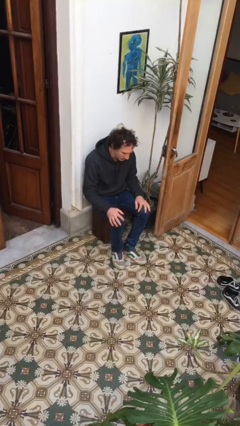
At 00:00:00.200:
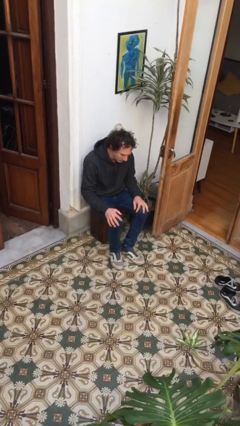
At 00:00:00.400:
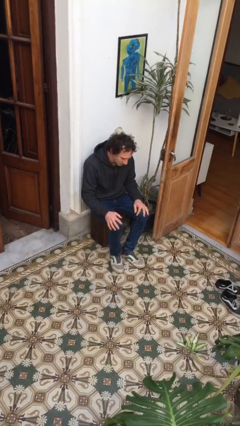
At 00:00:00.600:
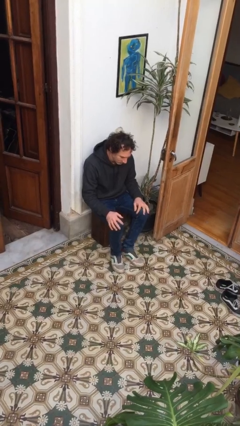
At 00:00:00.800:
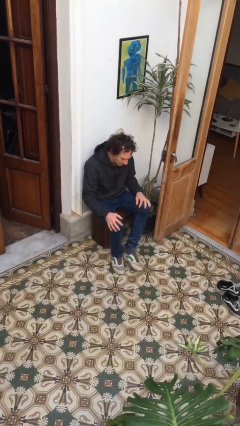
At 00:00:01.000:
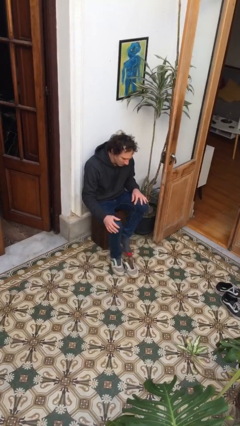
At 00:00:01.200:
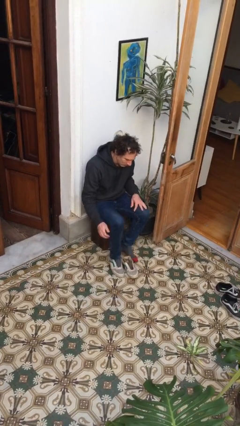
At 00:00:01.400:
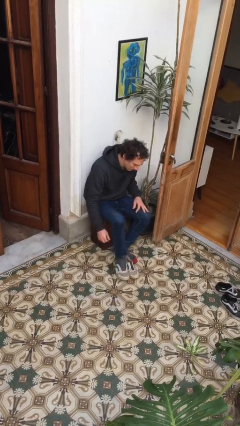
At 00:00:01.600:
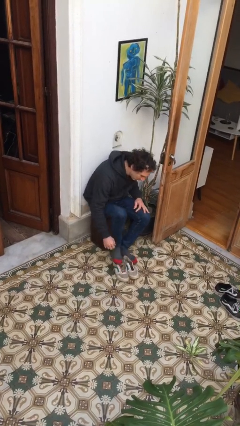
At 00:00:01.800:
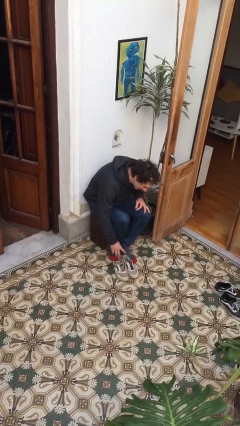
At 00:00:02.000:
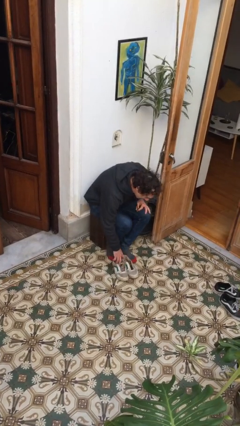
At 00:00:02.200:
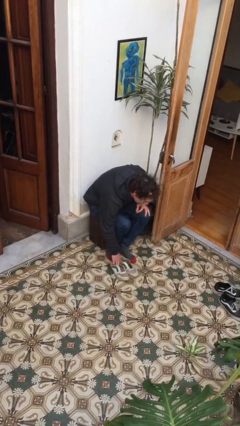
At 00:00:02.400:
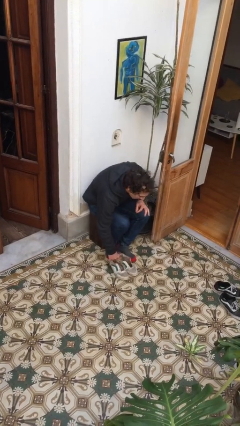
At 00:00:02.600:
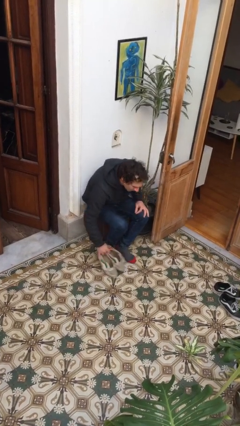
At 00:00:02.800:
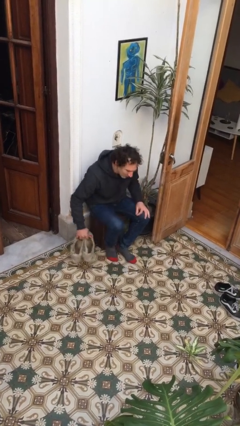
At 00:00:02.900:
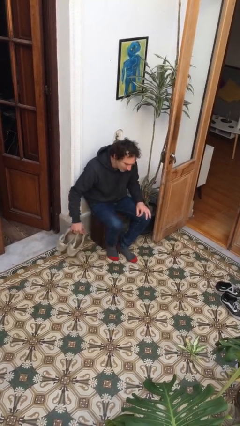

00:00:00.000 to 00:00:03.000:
person takes off shoes

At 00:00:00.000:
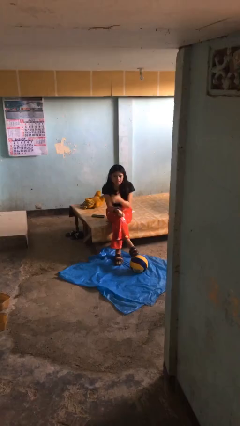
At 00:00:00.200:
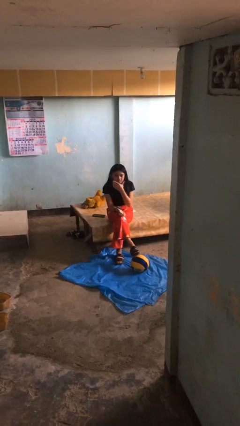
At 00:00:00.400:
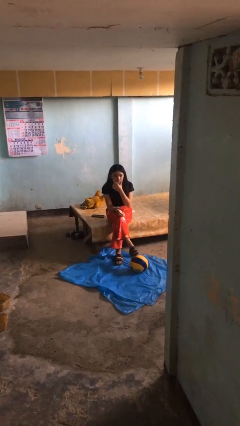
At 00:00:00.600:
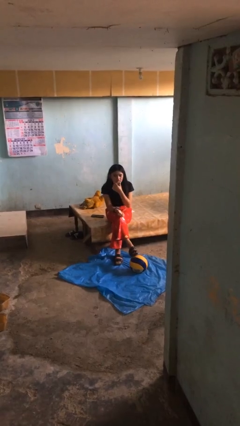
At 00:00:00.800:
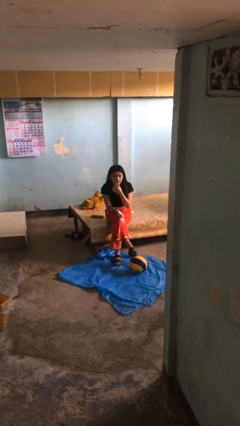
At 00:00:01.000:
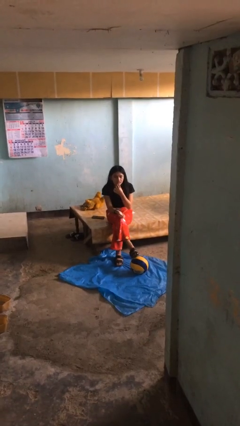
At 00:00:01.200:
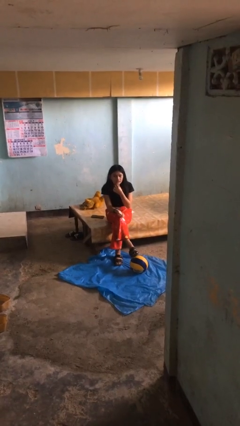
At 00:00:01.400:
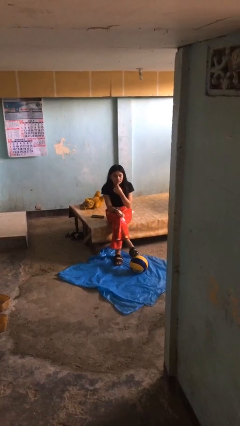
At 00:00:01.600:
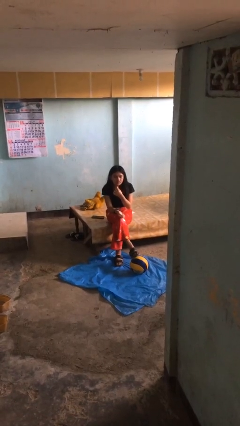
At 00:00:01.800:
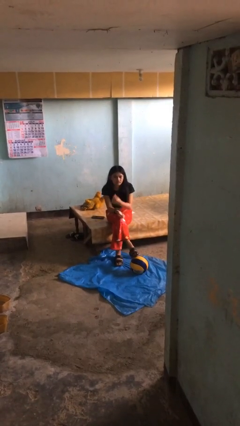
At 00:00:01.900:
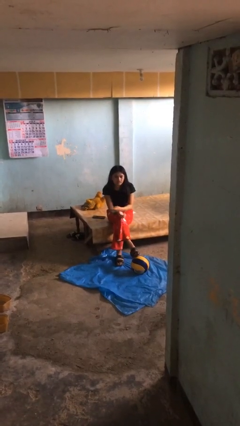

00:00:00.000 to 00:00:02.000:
person strokes chin

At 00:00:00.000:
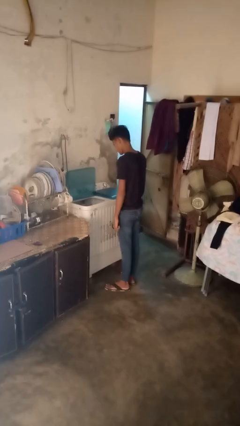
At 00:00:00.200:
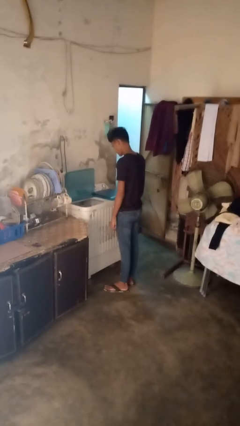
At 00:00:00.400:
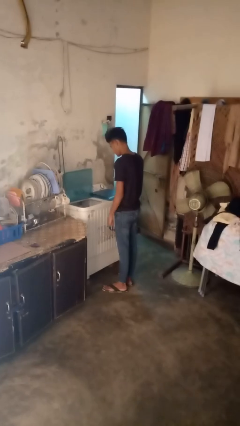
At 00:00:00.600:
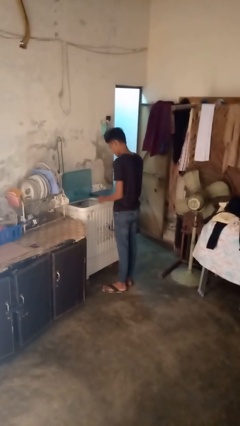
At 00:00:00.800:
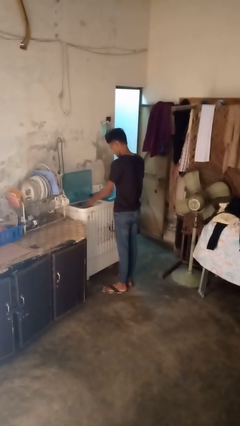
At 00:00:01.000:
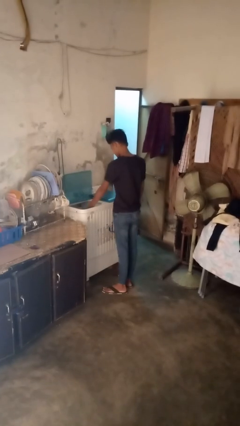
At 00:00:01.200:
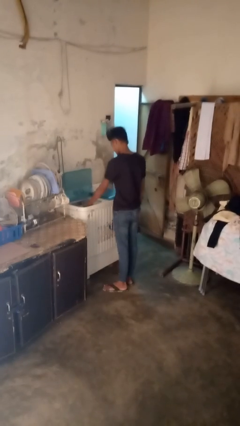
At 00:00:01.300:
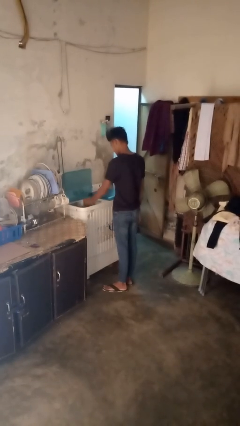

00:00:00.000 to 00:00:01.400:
person unloads dishwasher

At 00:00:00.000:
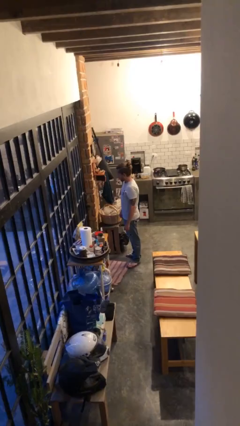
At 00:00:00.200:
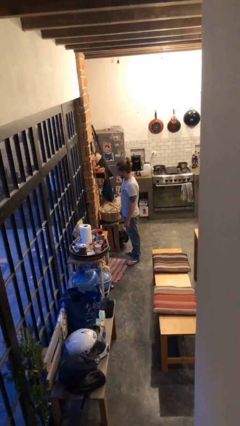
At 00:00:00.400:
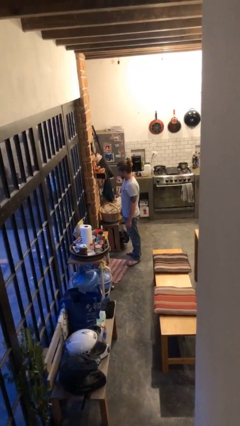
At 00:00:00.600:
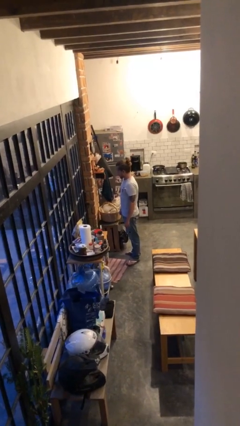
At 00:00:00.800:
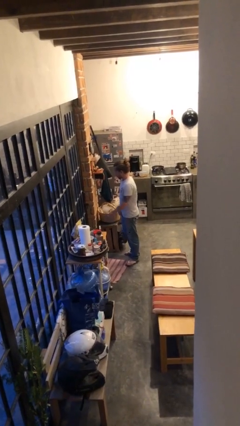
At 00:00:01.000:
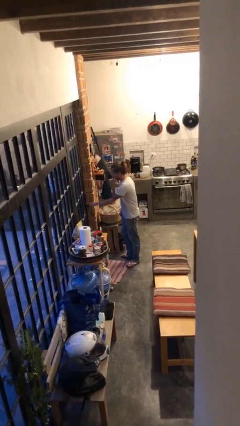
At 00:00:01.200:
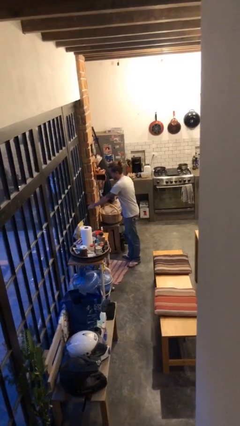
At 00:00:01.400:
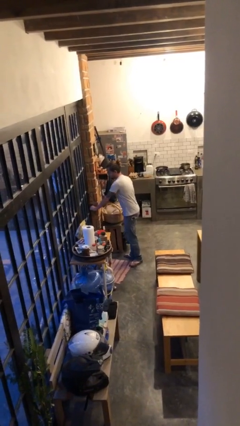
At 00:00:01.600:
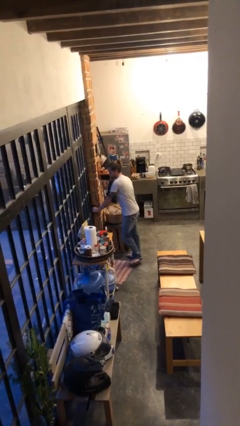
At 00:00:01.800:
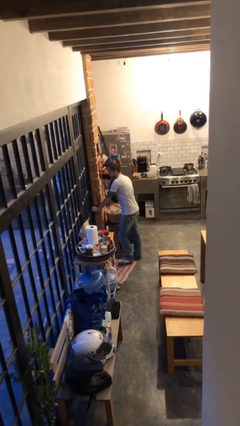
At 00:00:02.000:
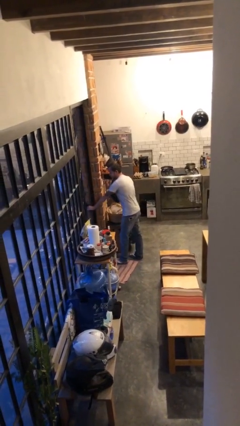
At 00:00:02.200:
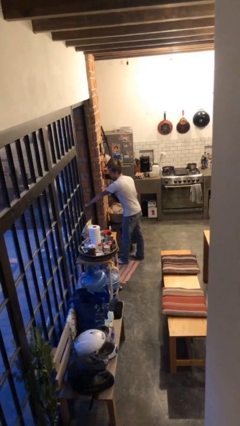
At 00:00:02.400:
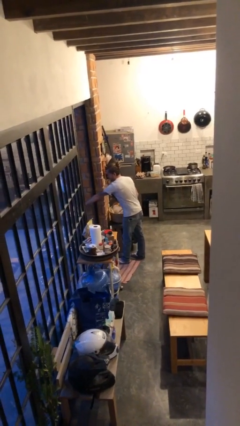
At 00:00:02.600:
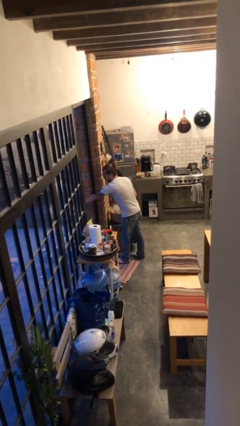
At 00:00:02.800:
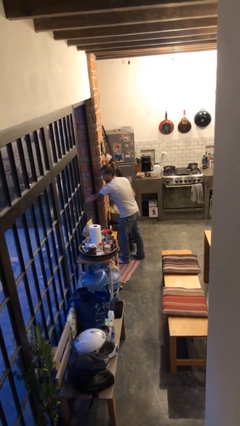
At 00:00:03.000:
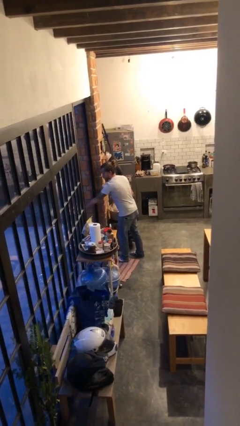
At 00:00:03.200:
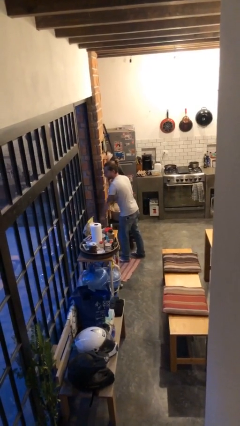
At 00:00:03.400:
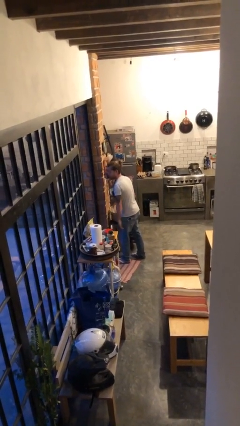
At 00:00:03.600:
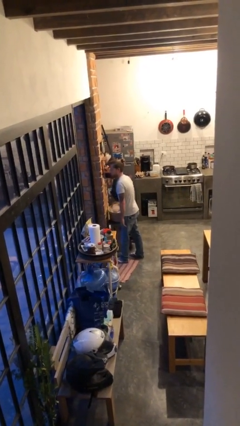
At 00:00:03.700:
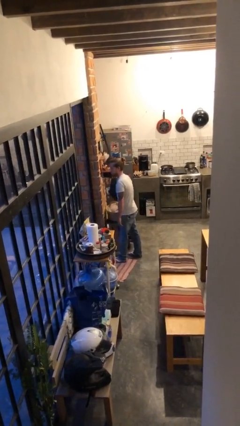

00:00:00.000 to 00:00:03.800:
person opens facility door

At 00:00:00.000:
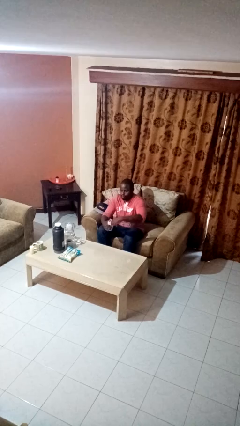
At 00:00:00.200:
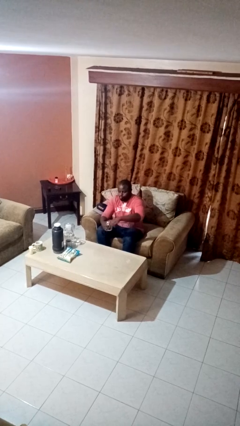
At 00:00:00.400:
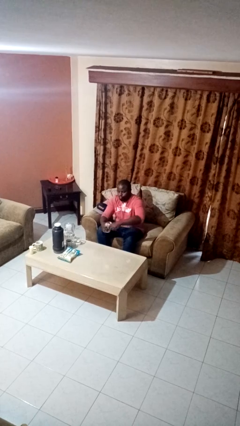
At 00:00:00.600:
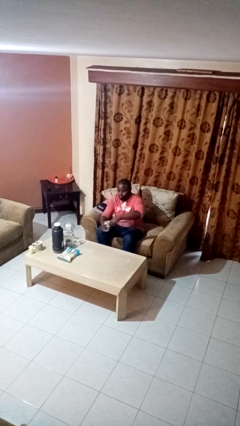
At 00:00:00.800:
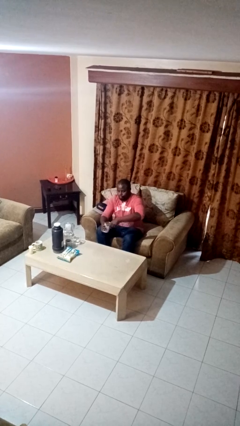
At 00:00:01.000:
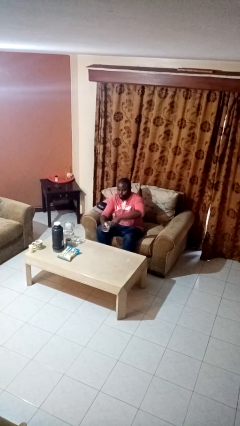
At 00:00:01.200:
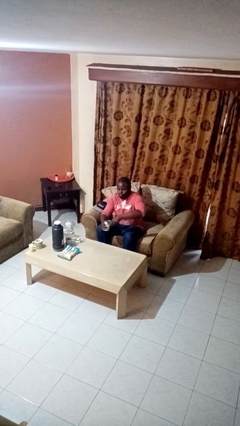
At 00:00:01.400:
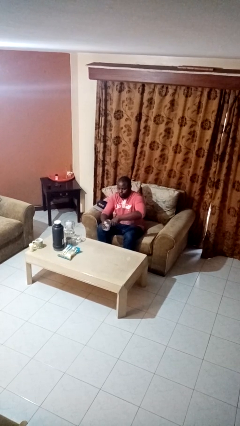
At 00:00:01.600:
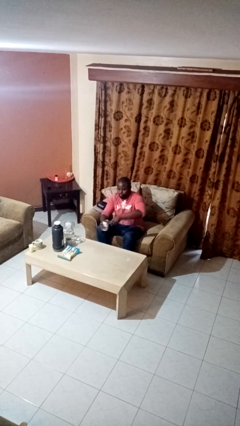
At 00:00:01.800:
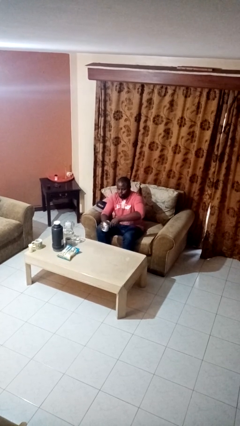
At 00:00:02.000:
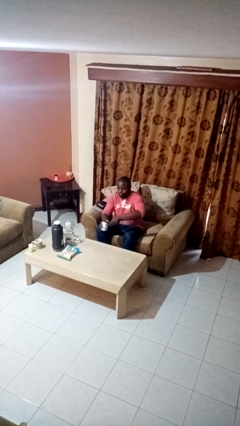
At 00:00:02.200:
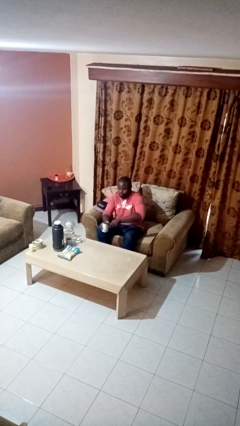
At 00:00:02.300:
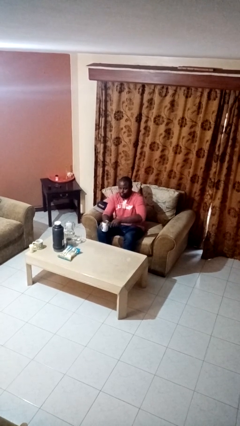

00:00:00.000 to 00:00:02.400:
person opens can with can opener

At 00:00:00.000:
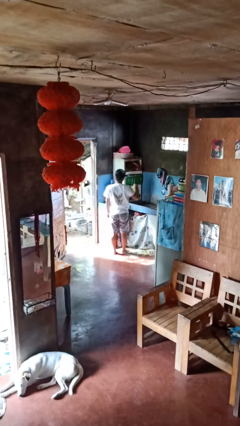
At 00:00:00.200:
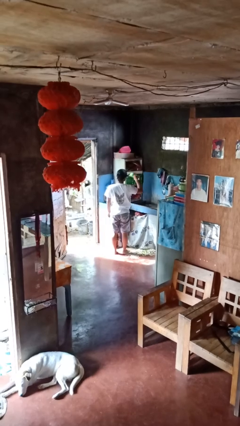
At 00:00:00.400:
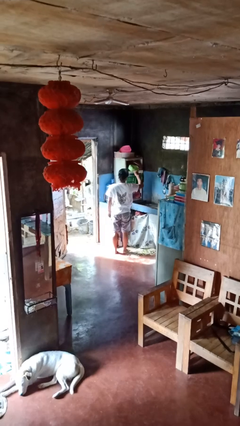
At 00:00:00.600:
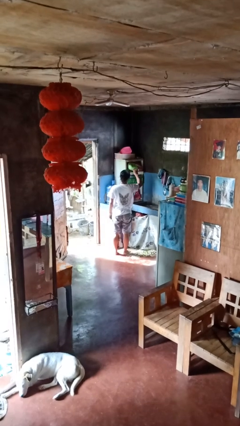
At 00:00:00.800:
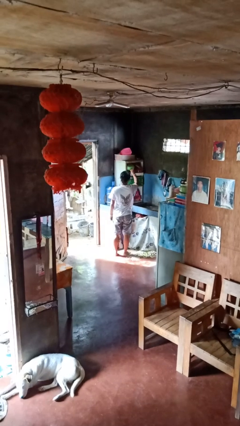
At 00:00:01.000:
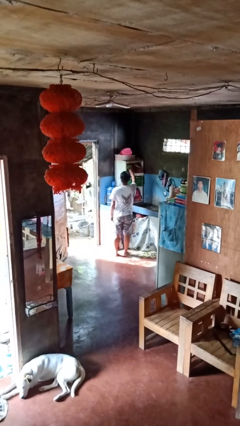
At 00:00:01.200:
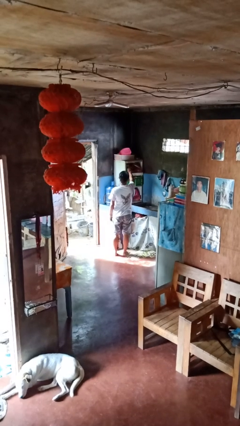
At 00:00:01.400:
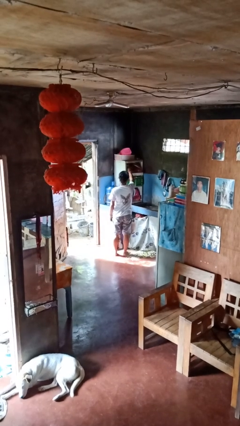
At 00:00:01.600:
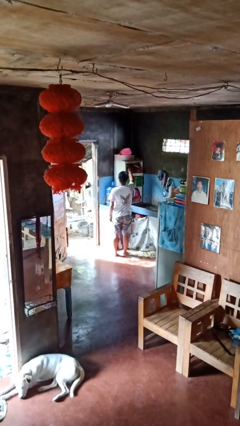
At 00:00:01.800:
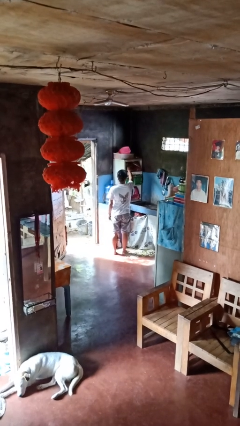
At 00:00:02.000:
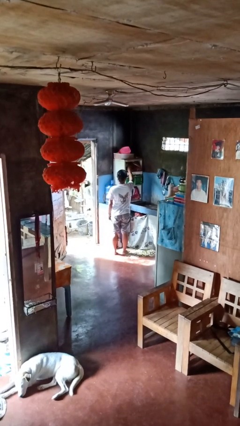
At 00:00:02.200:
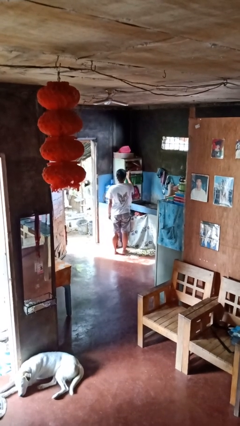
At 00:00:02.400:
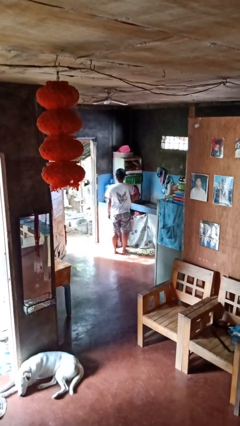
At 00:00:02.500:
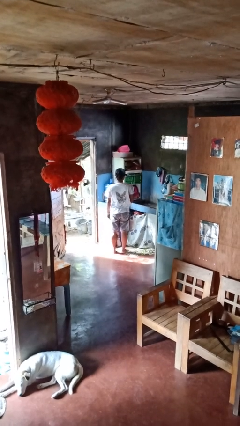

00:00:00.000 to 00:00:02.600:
person puts object in cabinet

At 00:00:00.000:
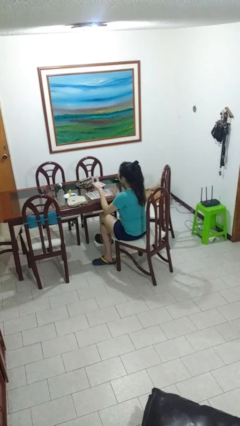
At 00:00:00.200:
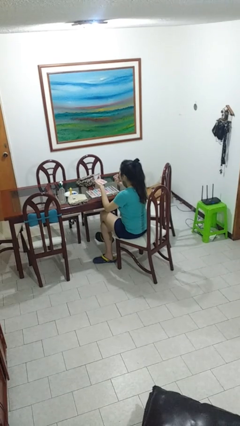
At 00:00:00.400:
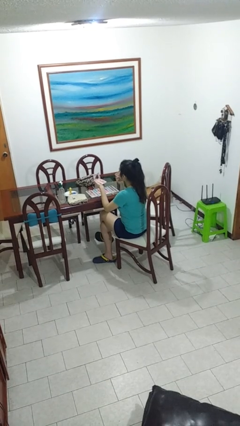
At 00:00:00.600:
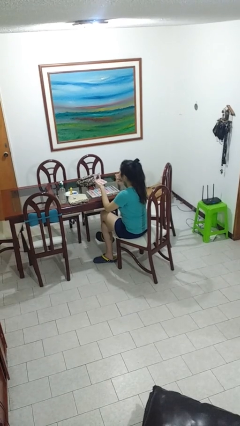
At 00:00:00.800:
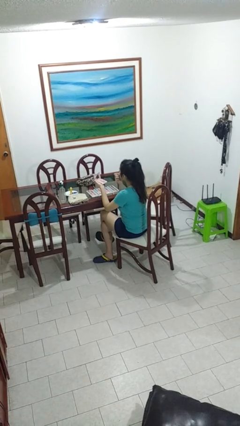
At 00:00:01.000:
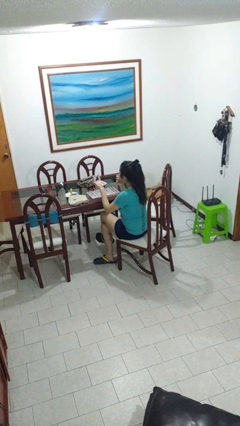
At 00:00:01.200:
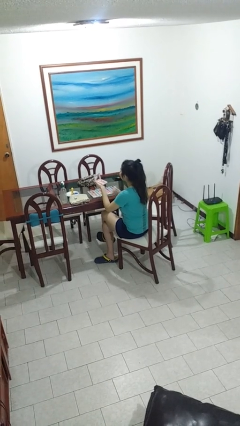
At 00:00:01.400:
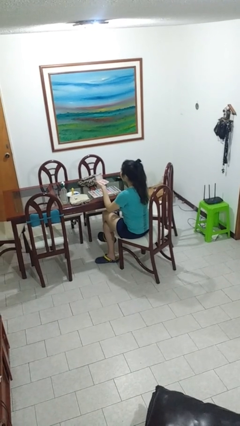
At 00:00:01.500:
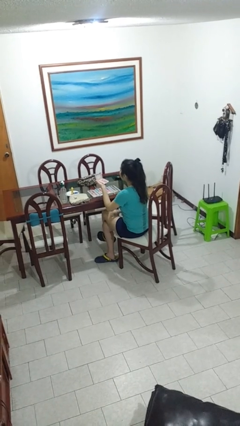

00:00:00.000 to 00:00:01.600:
person applies lip makeup
